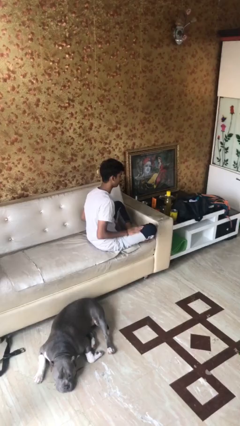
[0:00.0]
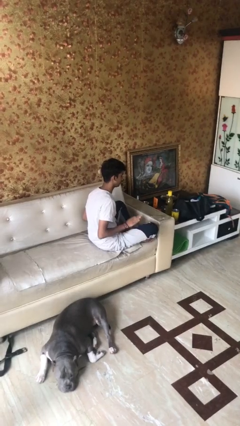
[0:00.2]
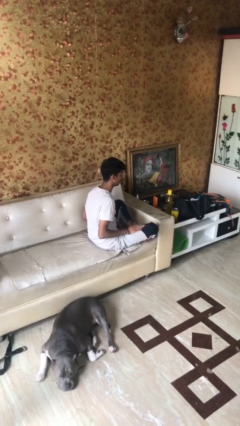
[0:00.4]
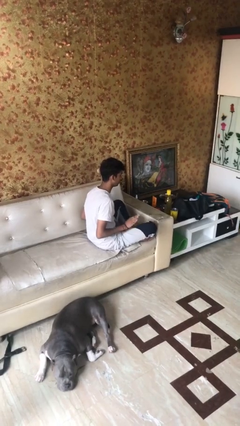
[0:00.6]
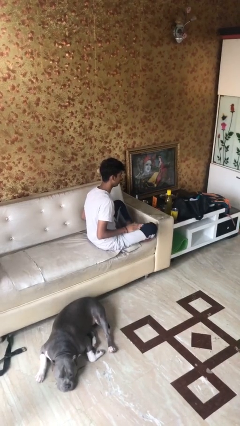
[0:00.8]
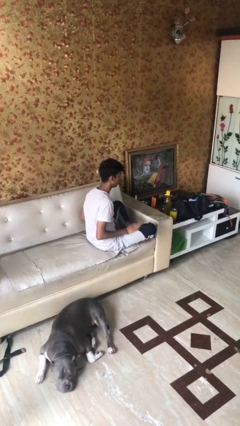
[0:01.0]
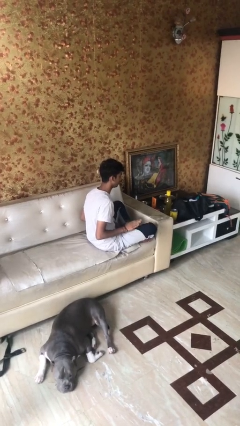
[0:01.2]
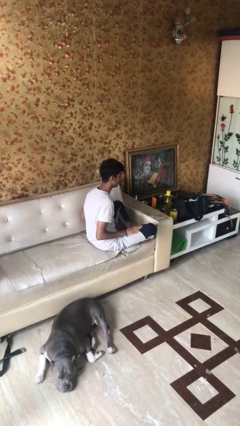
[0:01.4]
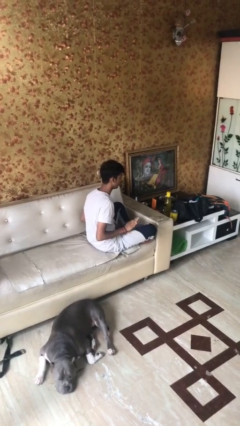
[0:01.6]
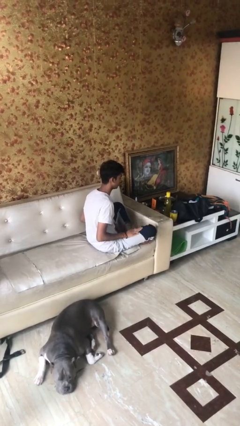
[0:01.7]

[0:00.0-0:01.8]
person slaps hands on thighs

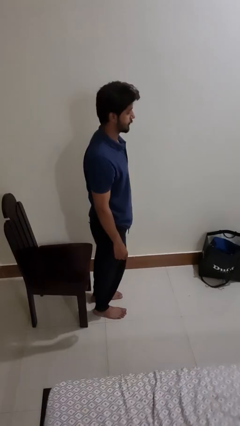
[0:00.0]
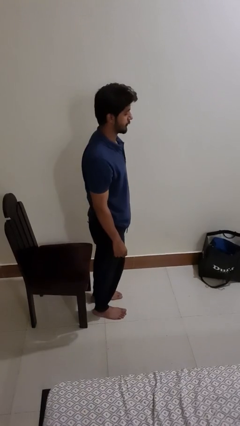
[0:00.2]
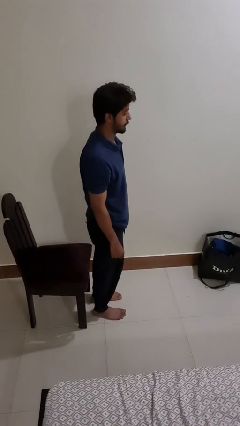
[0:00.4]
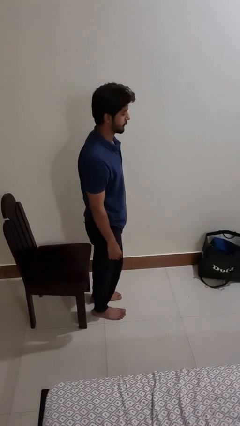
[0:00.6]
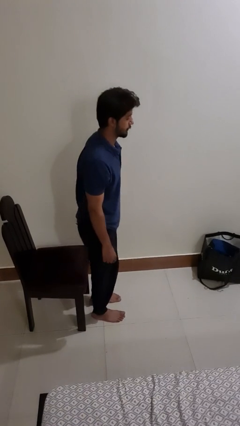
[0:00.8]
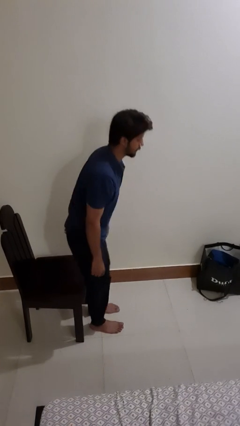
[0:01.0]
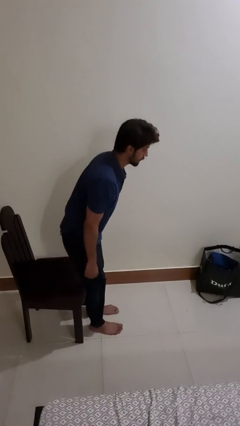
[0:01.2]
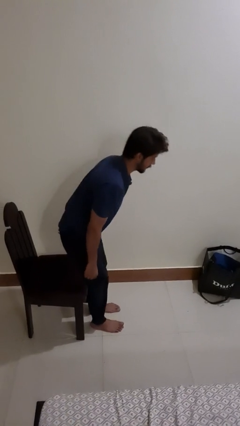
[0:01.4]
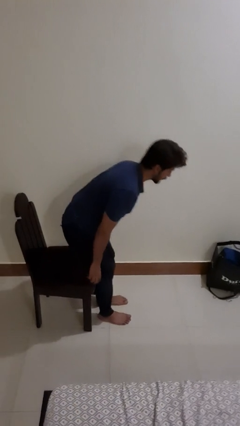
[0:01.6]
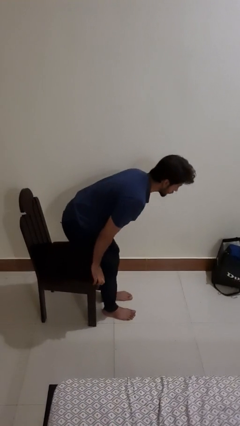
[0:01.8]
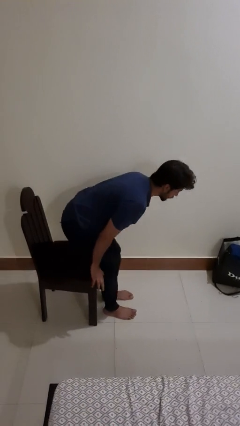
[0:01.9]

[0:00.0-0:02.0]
person stands up from floor

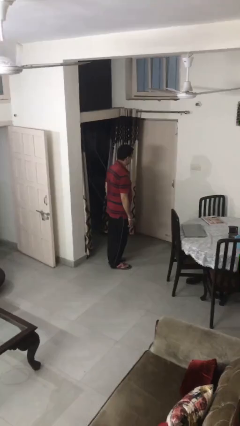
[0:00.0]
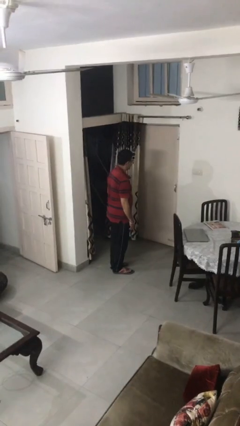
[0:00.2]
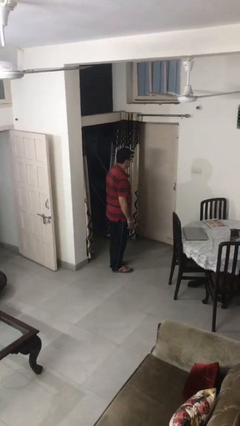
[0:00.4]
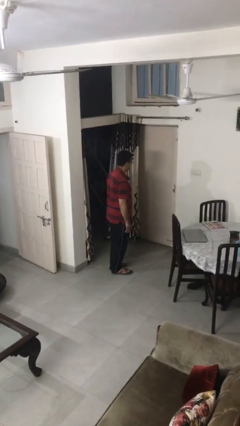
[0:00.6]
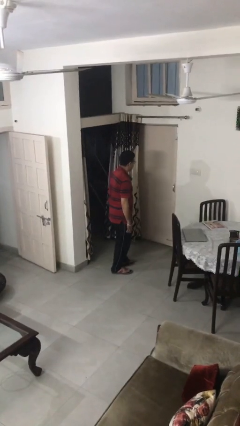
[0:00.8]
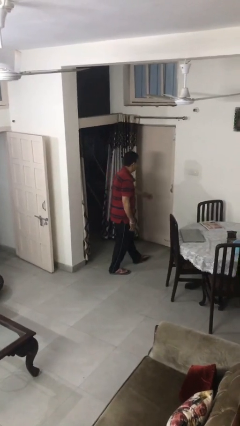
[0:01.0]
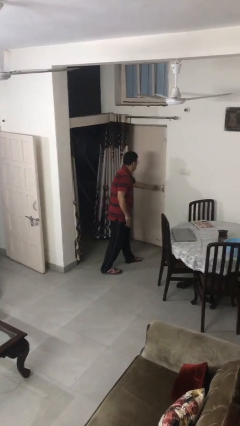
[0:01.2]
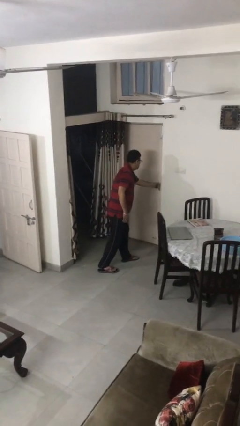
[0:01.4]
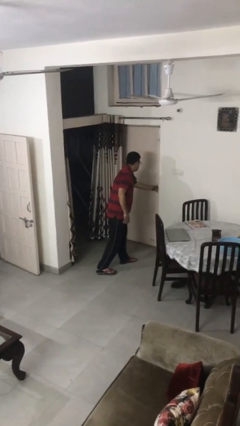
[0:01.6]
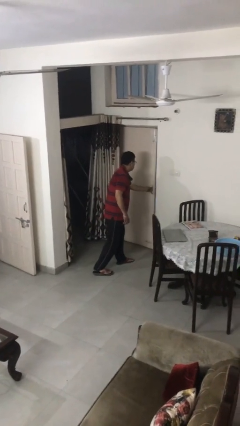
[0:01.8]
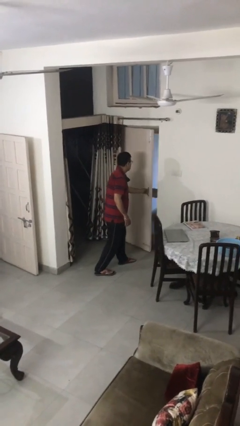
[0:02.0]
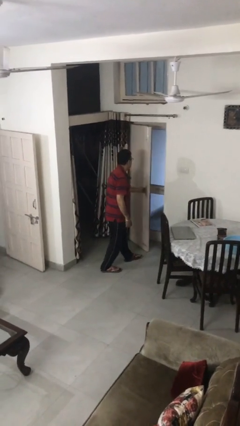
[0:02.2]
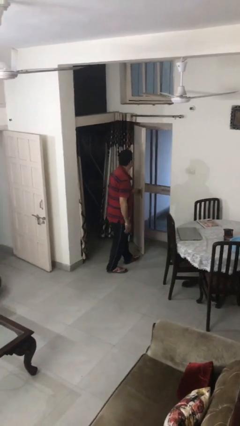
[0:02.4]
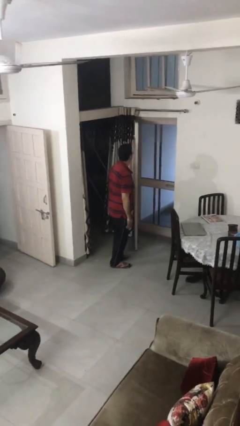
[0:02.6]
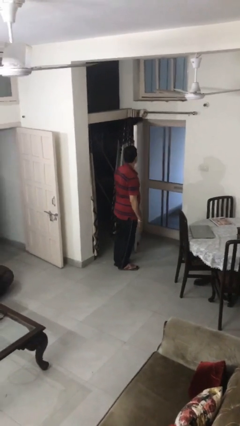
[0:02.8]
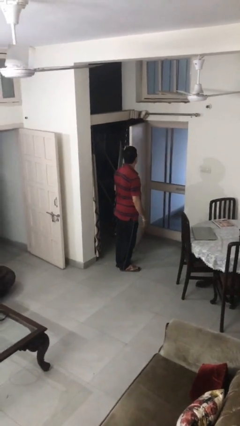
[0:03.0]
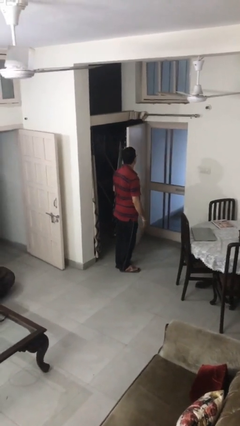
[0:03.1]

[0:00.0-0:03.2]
person opens facility door

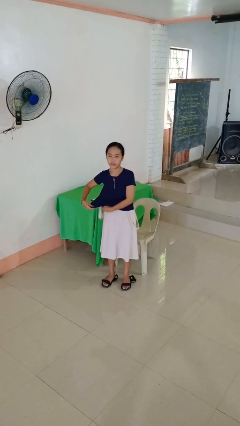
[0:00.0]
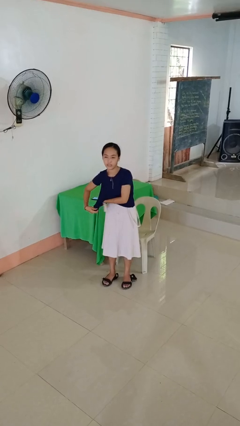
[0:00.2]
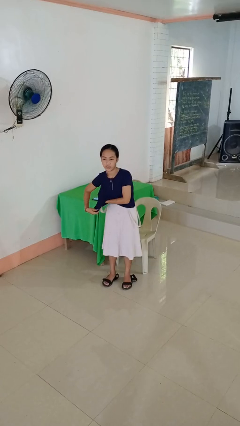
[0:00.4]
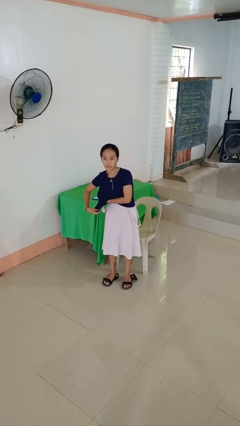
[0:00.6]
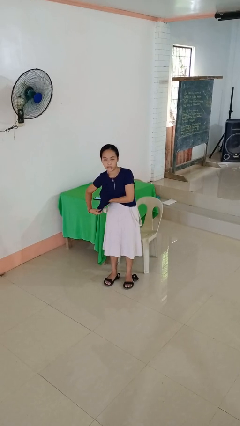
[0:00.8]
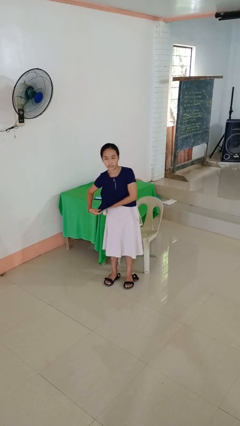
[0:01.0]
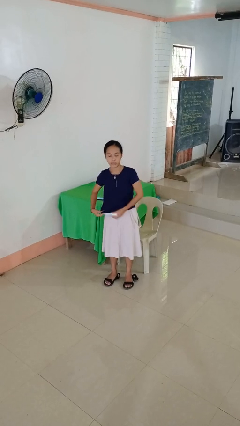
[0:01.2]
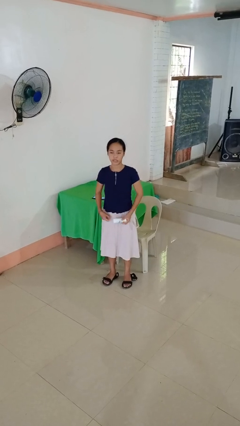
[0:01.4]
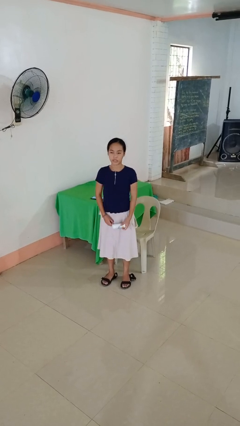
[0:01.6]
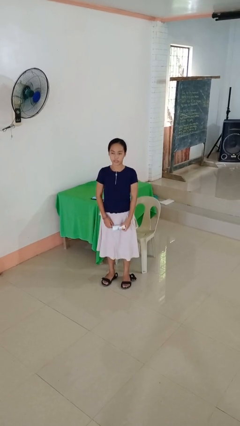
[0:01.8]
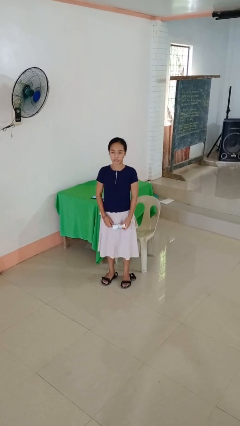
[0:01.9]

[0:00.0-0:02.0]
person applies deodorant

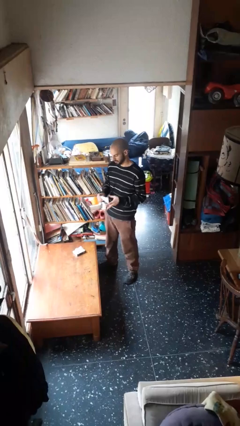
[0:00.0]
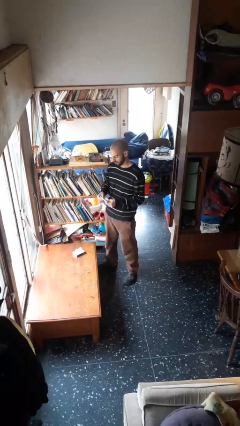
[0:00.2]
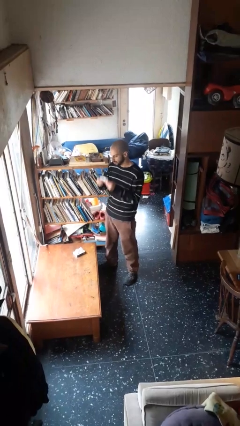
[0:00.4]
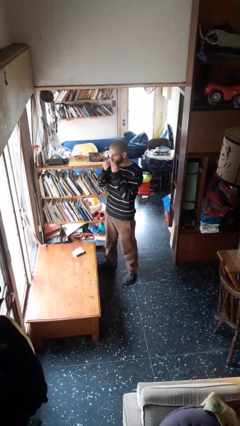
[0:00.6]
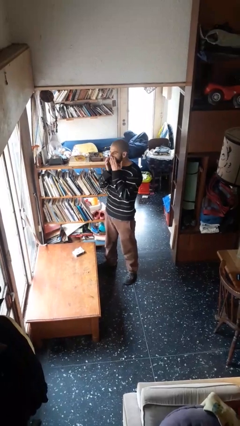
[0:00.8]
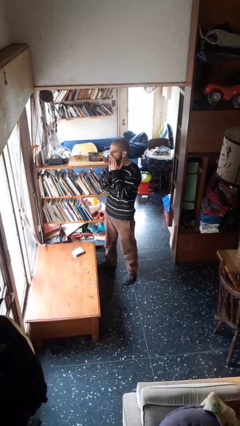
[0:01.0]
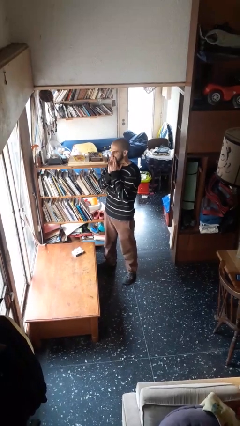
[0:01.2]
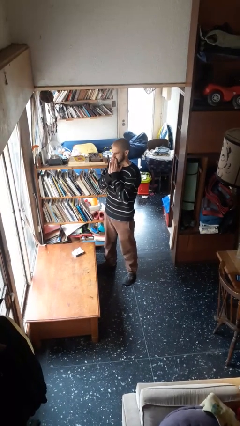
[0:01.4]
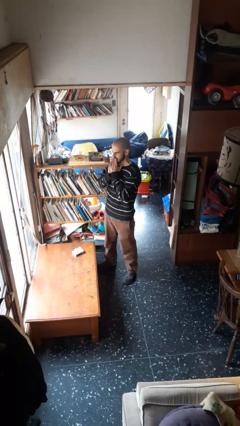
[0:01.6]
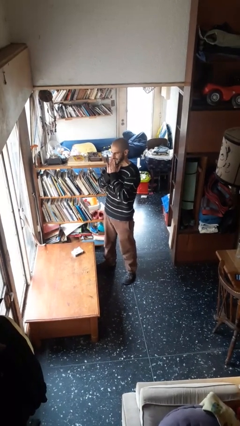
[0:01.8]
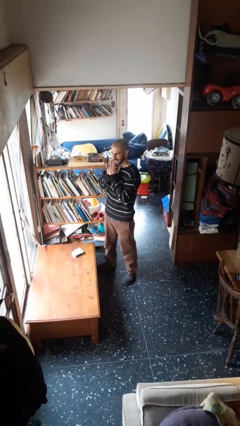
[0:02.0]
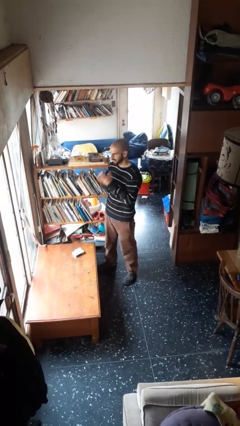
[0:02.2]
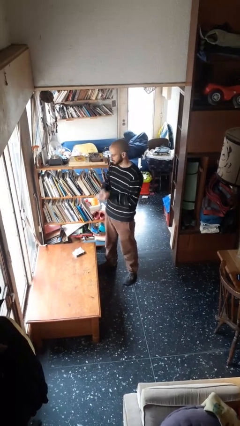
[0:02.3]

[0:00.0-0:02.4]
person wipes mouth with napkin

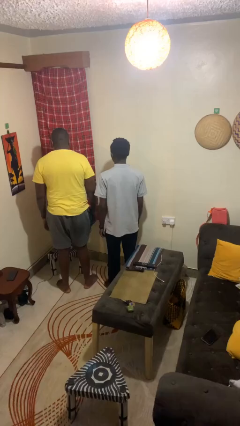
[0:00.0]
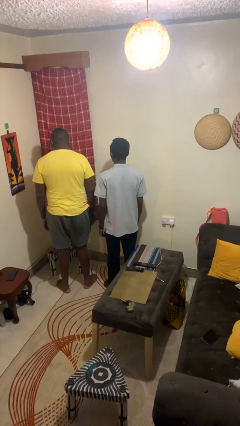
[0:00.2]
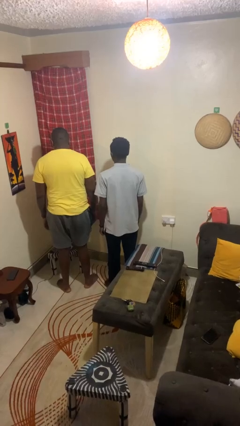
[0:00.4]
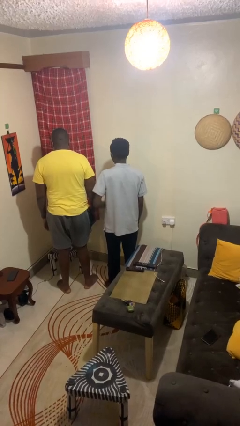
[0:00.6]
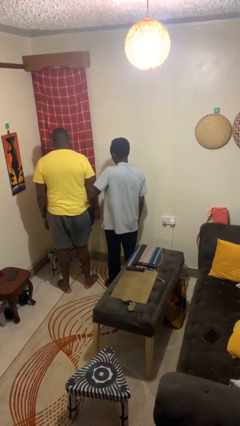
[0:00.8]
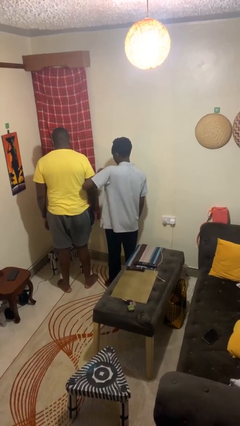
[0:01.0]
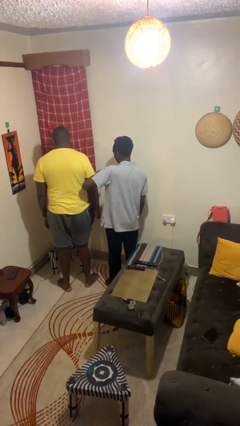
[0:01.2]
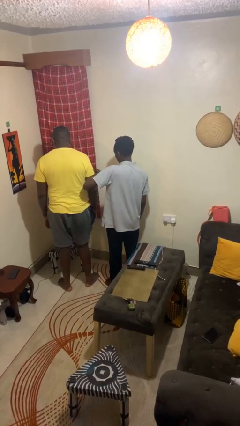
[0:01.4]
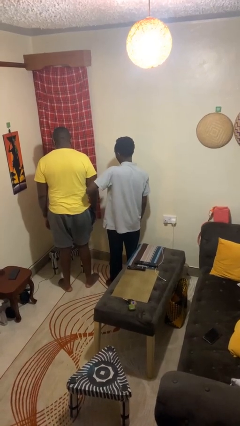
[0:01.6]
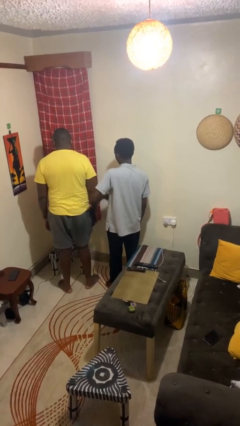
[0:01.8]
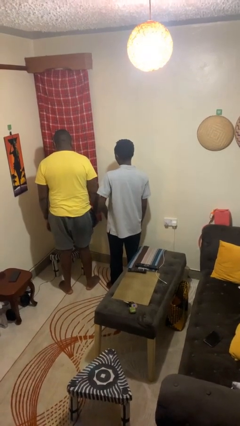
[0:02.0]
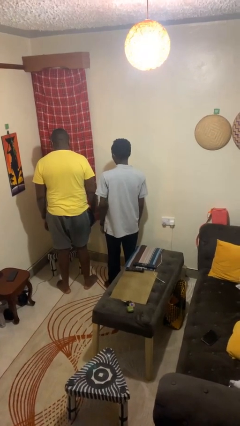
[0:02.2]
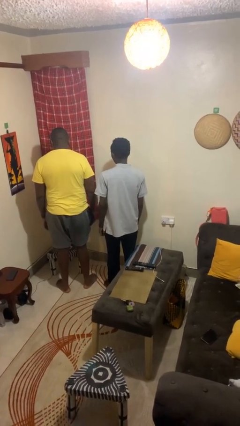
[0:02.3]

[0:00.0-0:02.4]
person nudges person with elbow

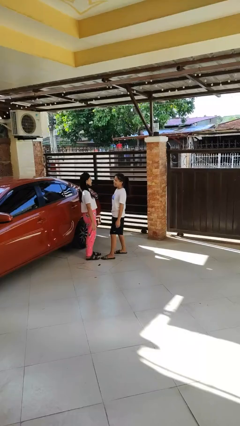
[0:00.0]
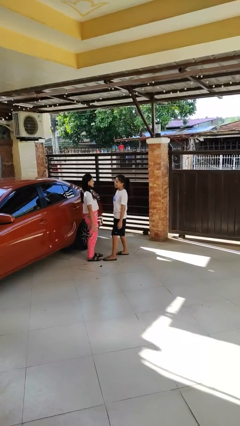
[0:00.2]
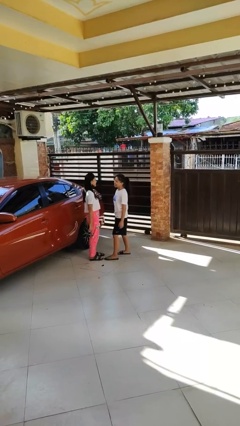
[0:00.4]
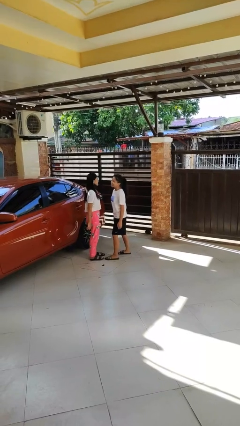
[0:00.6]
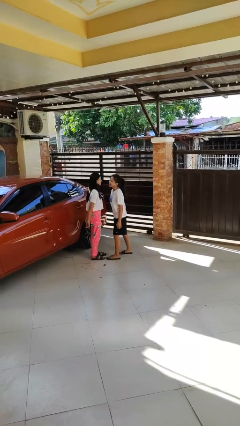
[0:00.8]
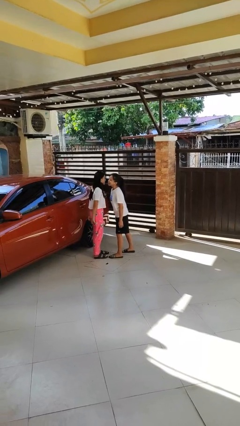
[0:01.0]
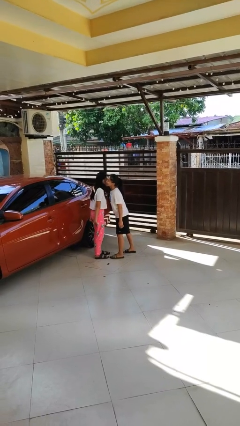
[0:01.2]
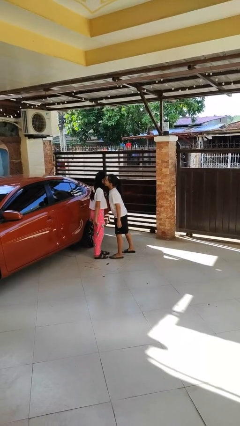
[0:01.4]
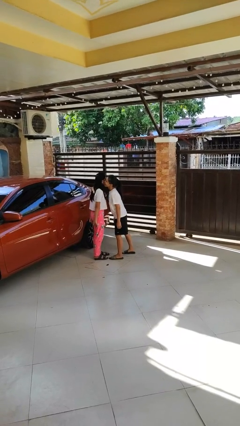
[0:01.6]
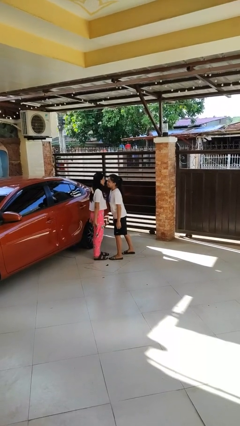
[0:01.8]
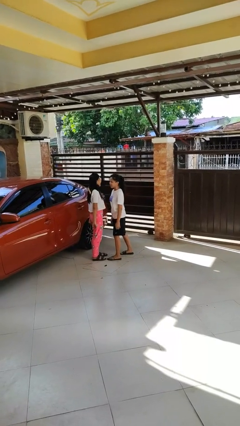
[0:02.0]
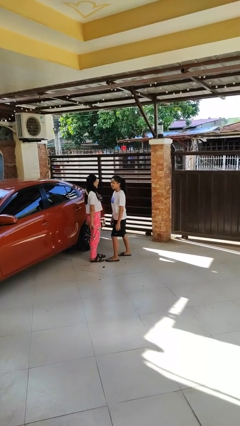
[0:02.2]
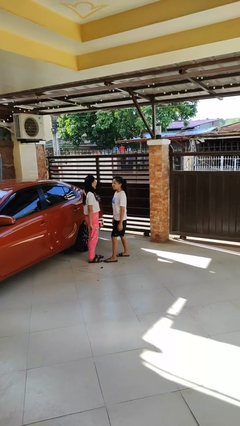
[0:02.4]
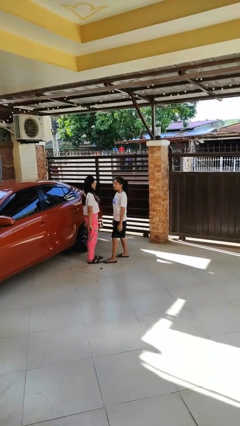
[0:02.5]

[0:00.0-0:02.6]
person kisses cheek of person

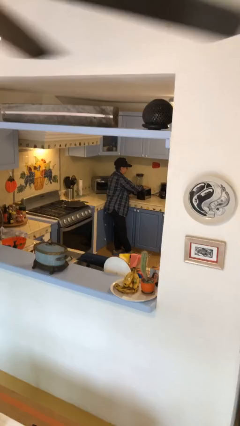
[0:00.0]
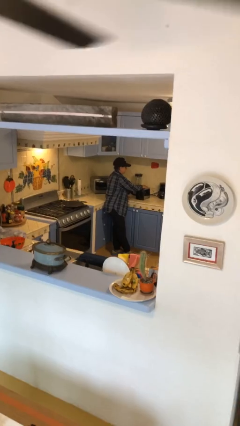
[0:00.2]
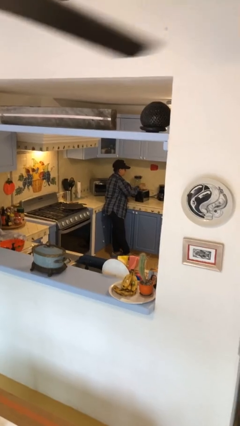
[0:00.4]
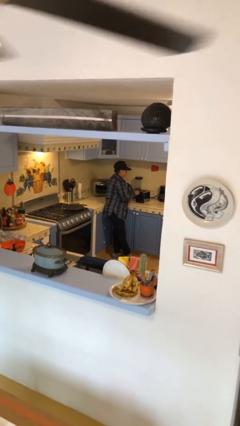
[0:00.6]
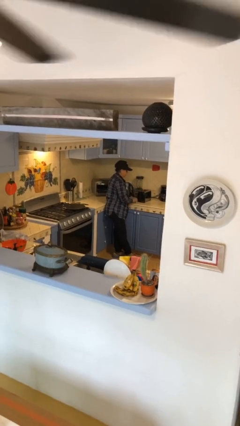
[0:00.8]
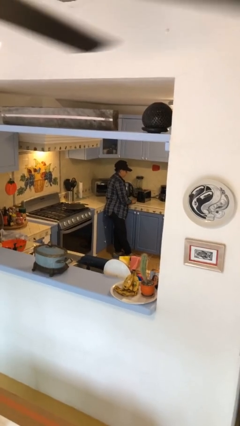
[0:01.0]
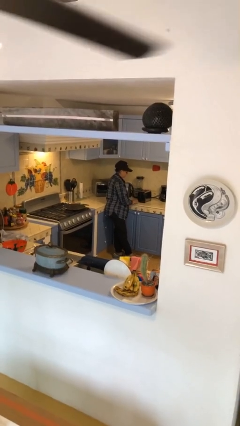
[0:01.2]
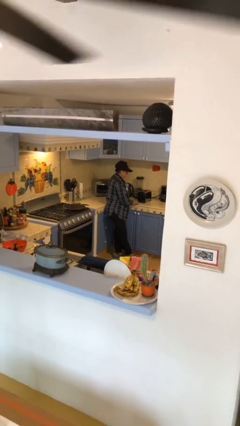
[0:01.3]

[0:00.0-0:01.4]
person takes object from toaster
